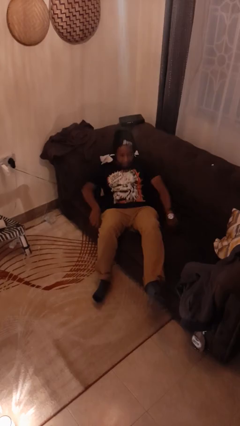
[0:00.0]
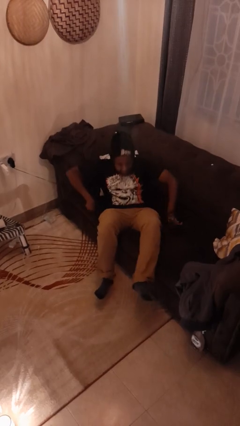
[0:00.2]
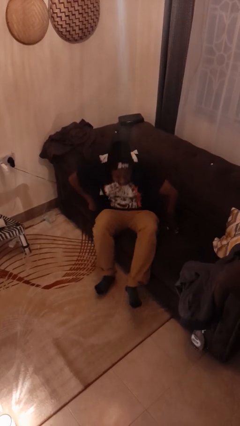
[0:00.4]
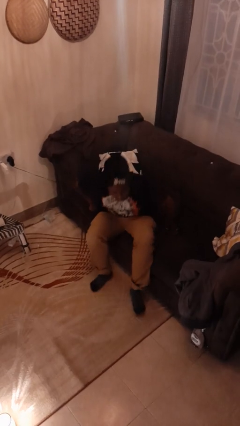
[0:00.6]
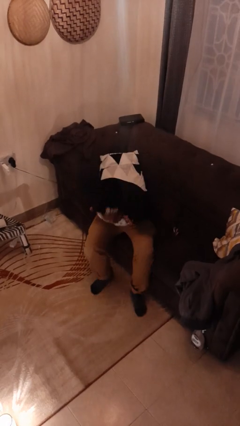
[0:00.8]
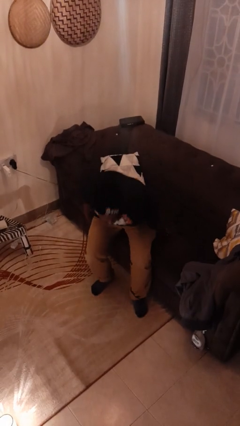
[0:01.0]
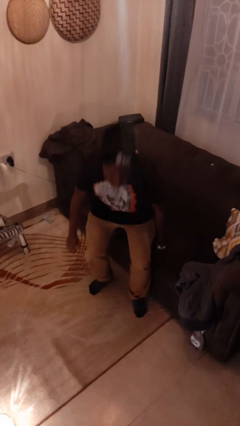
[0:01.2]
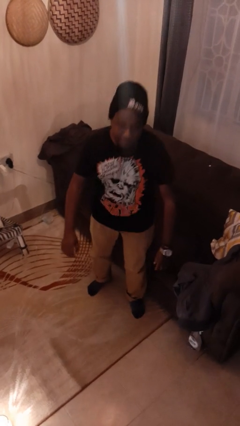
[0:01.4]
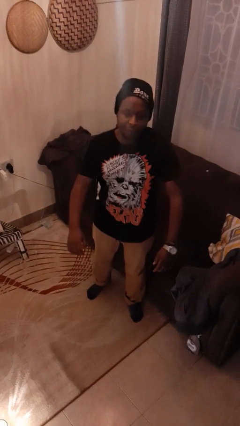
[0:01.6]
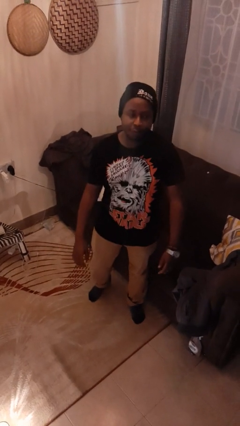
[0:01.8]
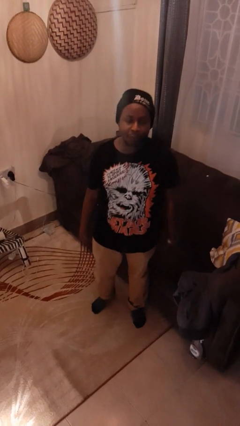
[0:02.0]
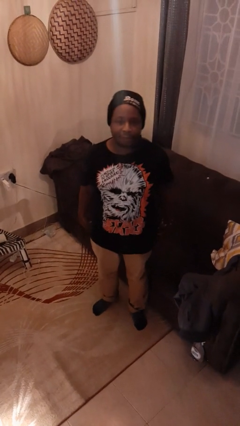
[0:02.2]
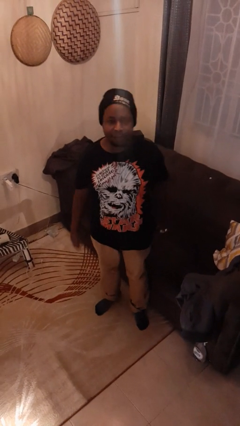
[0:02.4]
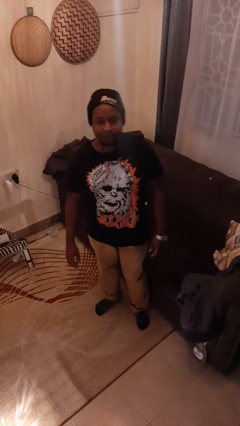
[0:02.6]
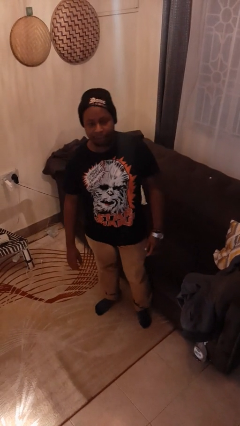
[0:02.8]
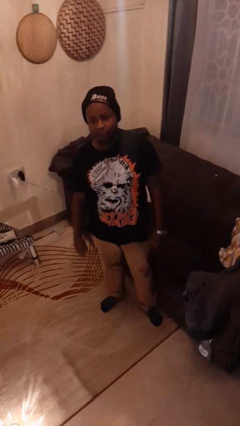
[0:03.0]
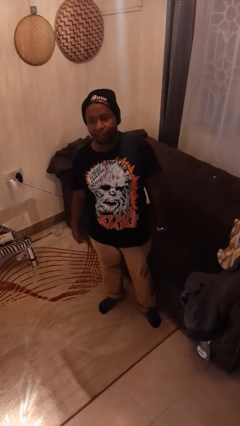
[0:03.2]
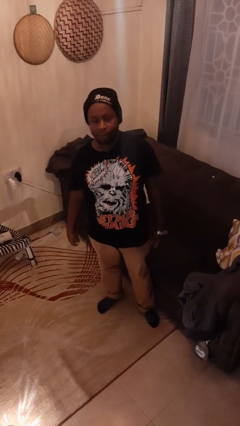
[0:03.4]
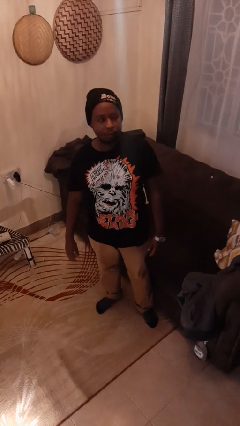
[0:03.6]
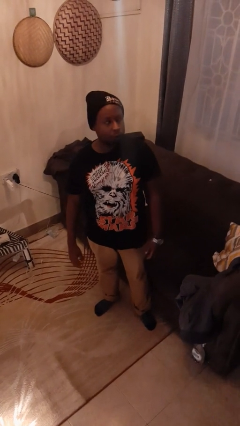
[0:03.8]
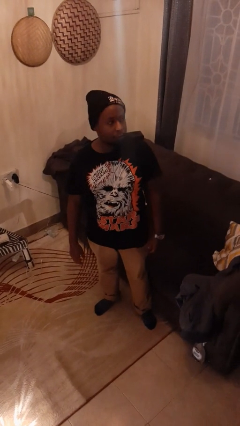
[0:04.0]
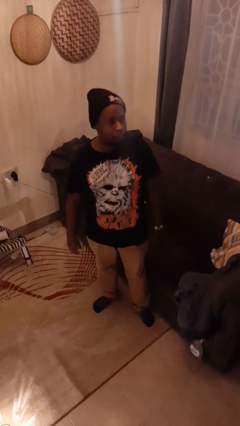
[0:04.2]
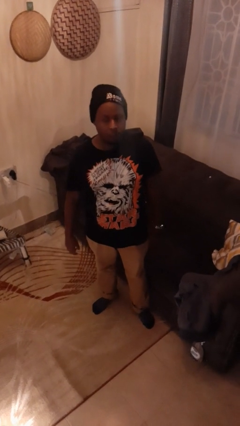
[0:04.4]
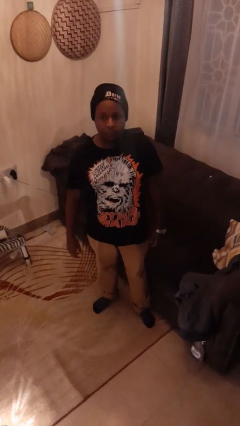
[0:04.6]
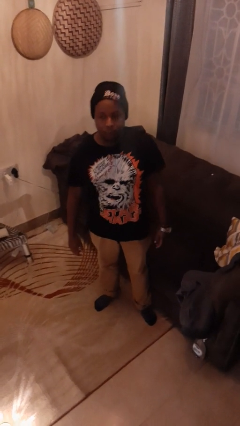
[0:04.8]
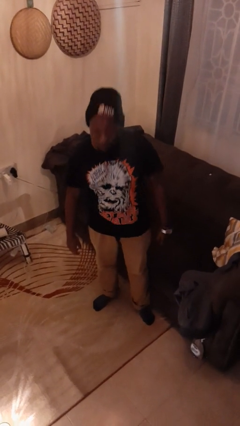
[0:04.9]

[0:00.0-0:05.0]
person stands up

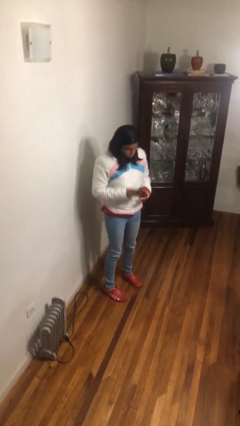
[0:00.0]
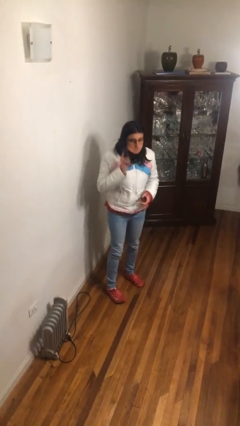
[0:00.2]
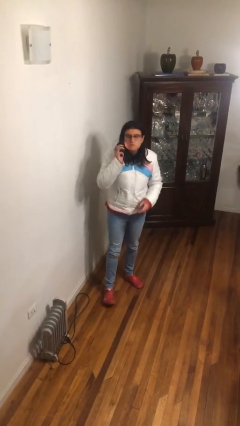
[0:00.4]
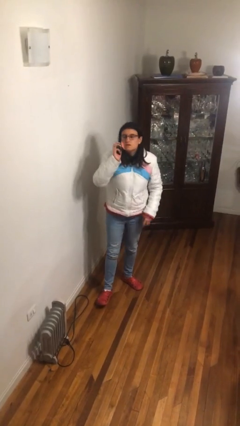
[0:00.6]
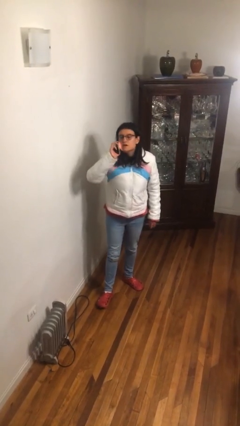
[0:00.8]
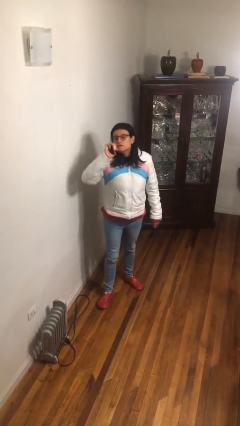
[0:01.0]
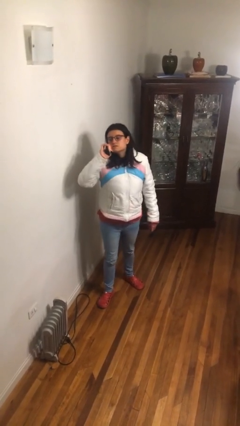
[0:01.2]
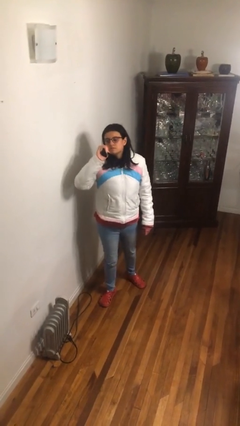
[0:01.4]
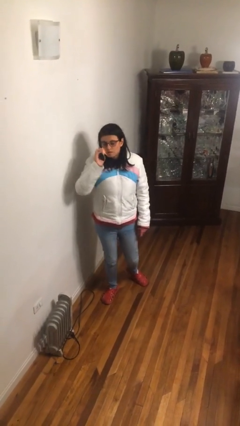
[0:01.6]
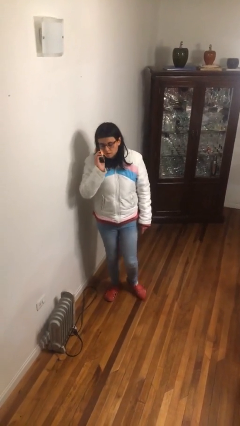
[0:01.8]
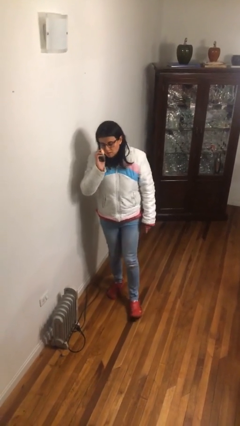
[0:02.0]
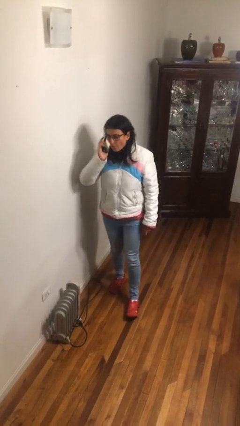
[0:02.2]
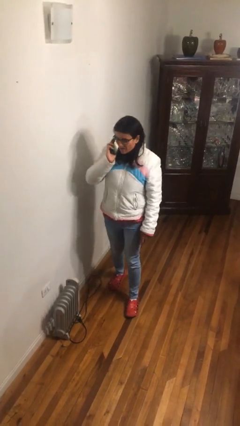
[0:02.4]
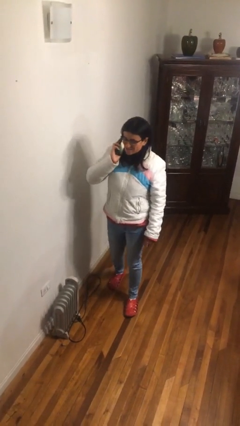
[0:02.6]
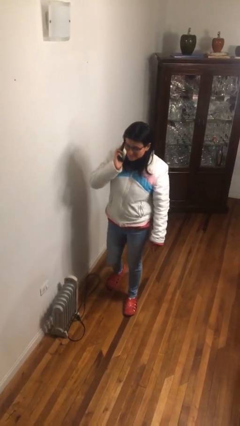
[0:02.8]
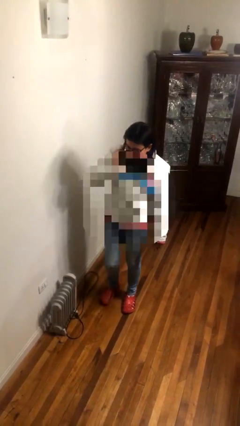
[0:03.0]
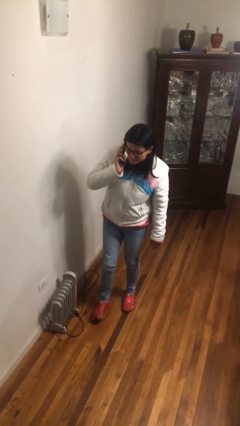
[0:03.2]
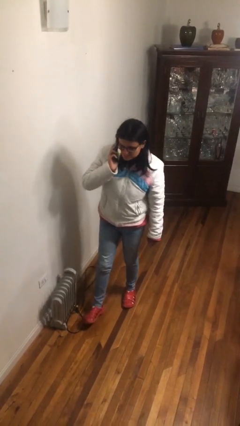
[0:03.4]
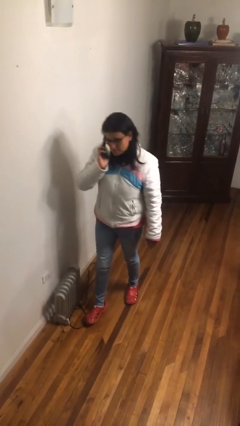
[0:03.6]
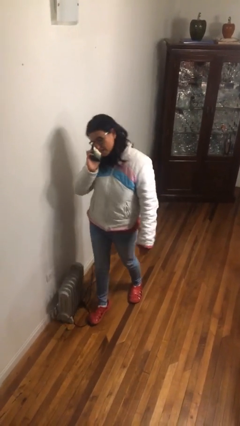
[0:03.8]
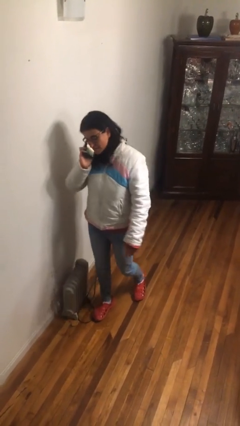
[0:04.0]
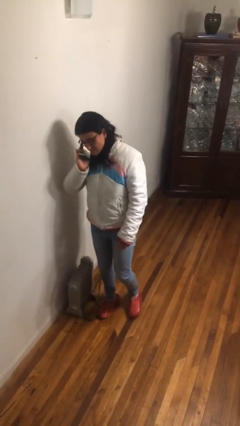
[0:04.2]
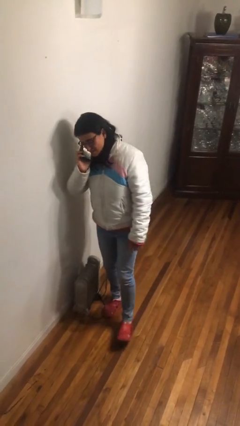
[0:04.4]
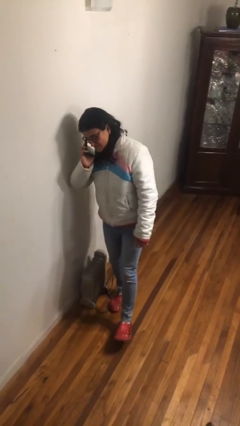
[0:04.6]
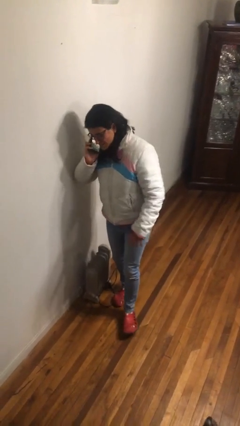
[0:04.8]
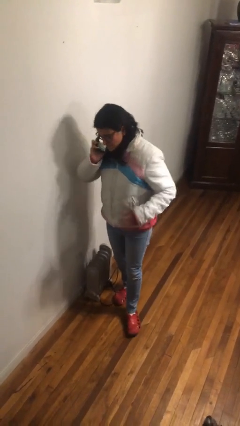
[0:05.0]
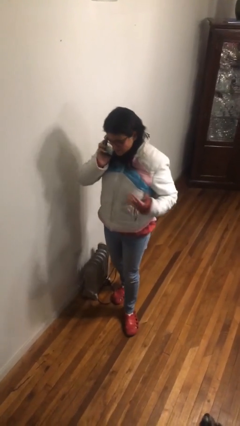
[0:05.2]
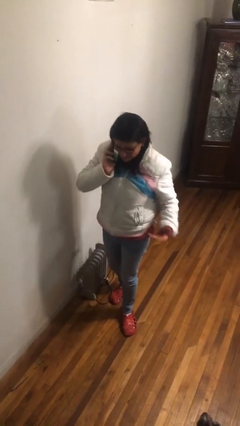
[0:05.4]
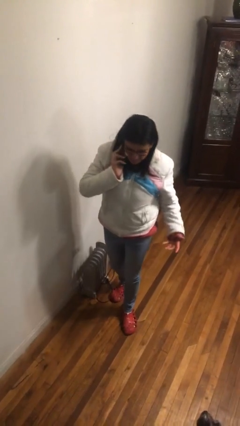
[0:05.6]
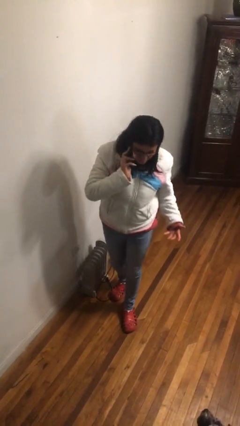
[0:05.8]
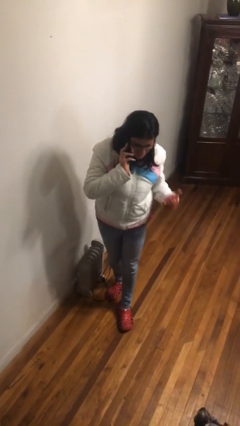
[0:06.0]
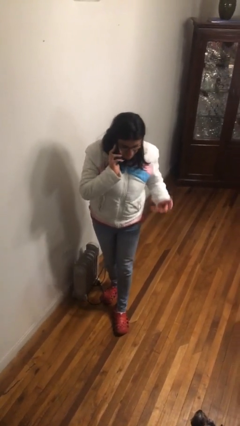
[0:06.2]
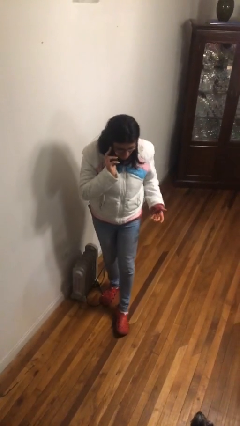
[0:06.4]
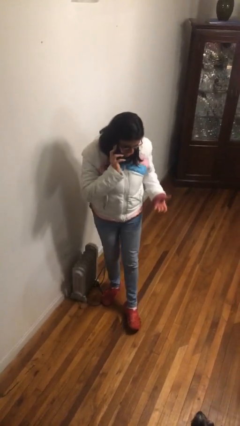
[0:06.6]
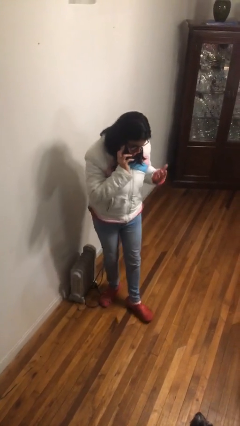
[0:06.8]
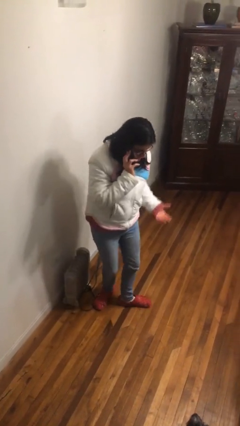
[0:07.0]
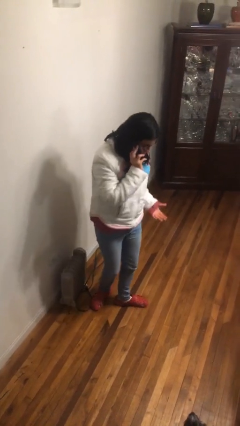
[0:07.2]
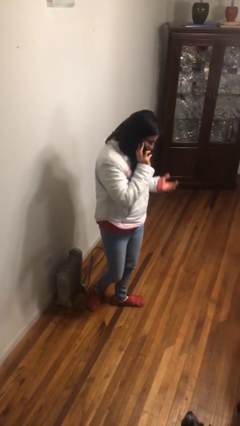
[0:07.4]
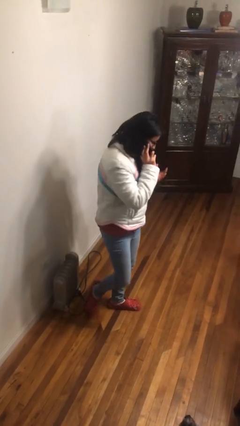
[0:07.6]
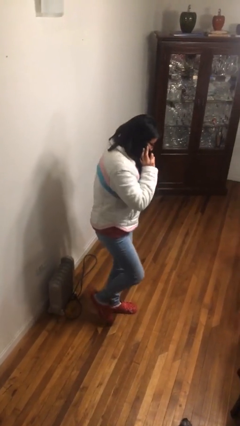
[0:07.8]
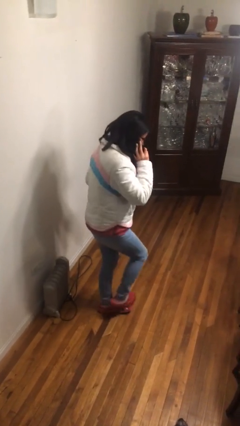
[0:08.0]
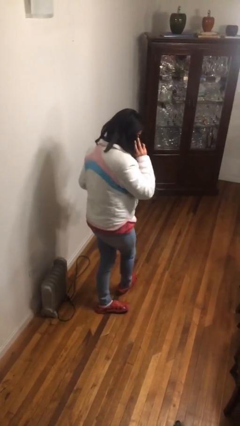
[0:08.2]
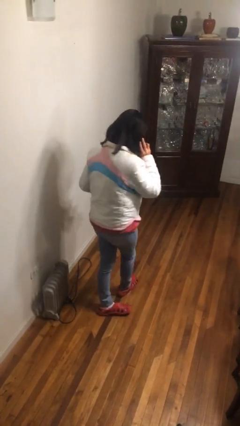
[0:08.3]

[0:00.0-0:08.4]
person talks on phone

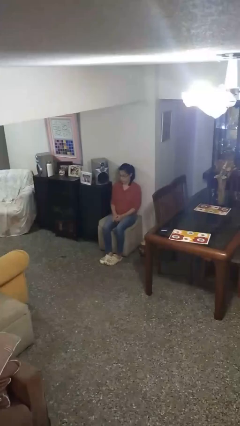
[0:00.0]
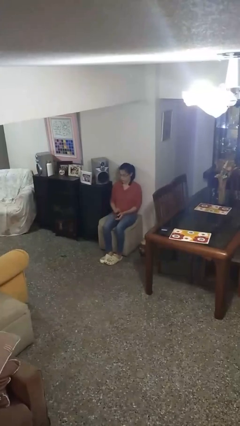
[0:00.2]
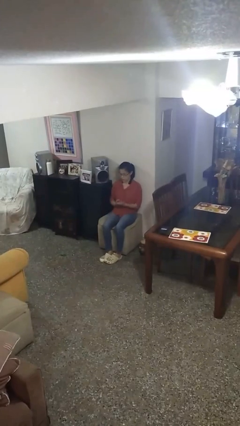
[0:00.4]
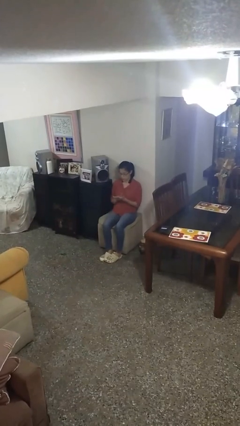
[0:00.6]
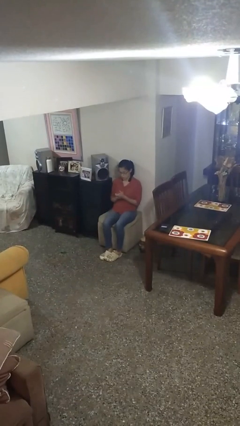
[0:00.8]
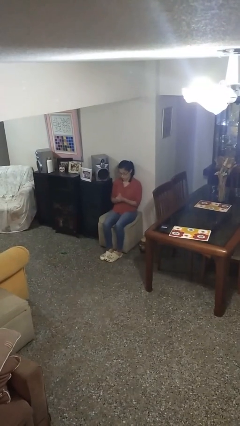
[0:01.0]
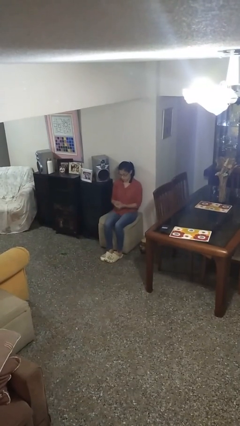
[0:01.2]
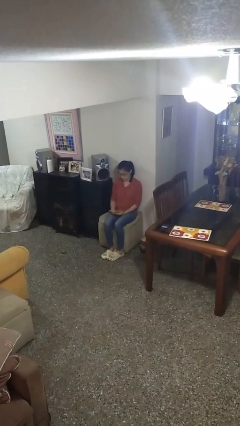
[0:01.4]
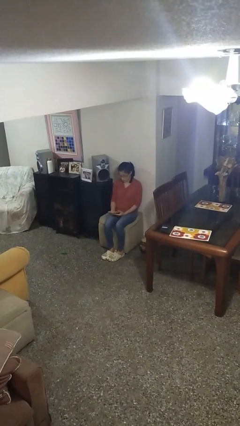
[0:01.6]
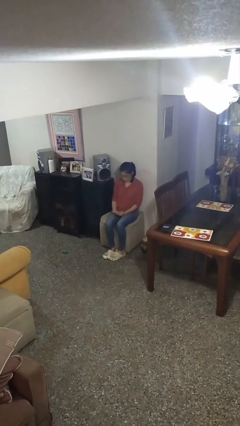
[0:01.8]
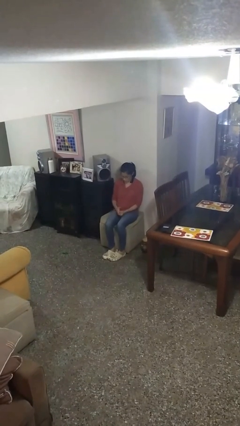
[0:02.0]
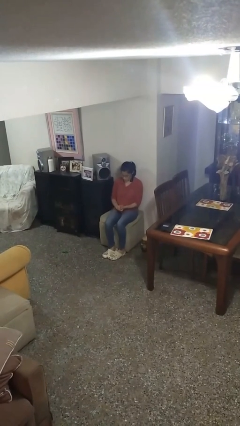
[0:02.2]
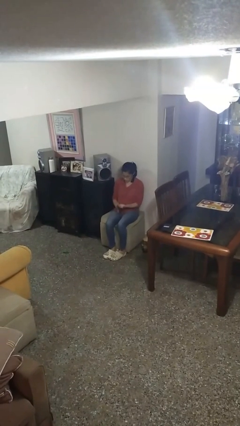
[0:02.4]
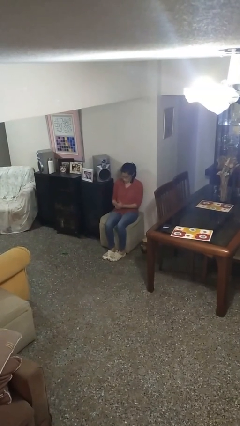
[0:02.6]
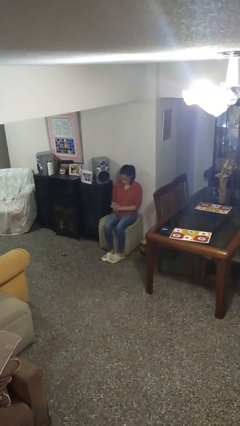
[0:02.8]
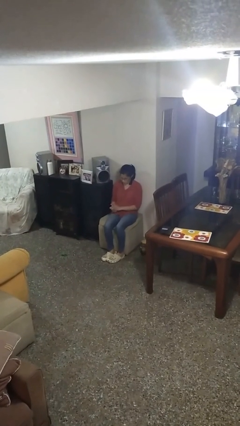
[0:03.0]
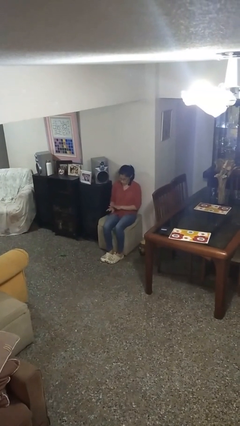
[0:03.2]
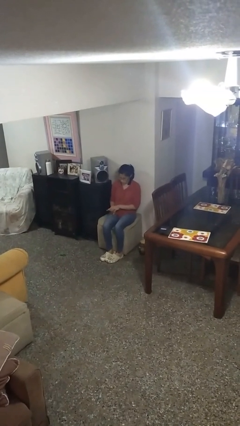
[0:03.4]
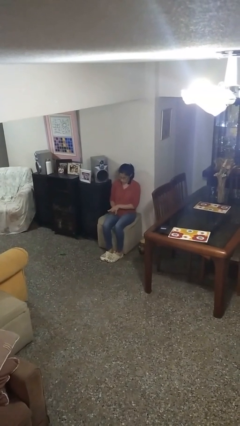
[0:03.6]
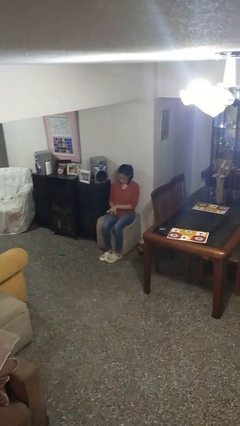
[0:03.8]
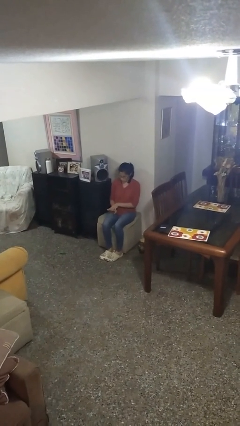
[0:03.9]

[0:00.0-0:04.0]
person looks at hands in lap

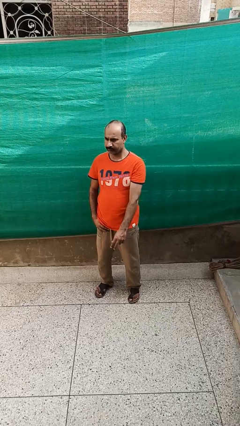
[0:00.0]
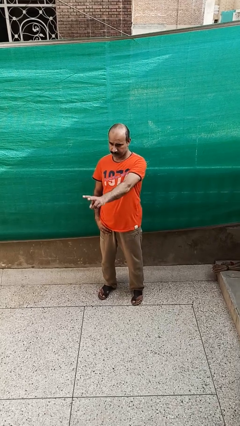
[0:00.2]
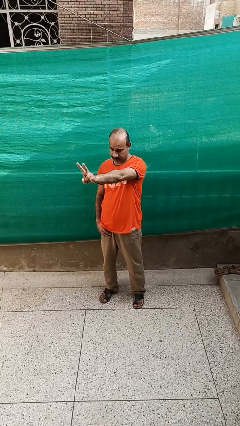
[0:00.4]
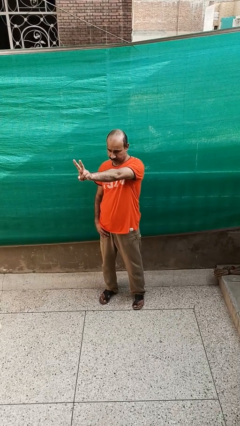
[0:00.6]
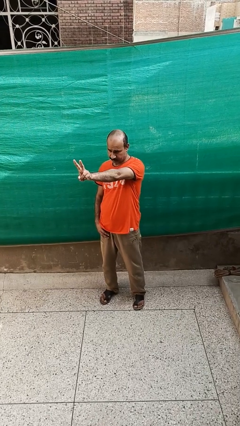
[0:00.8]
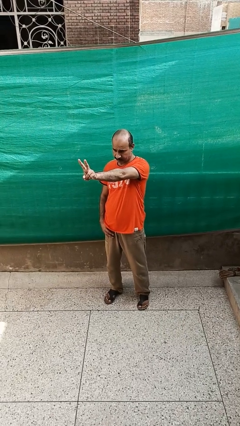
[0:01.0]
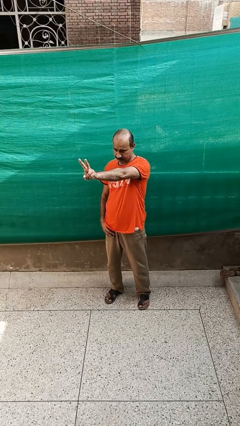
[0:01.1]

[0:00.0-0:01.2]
person gestures peace
